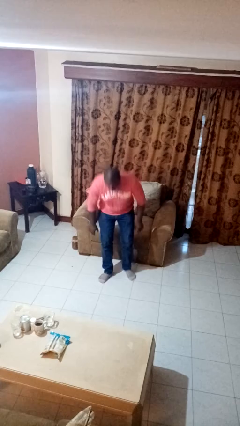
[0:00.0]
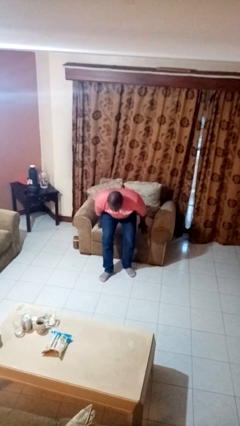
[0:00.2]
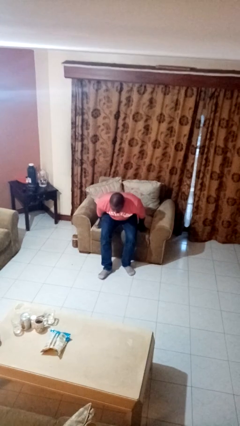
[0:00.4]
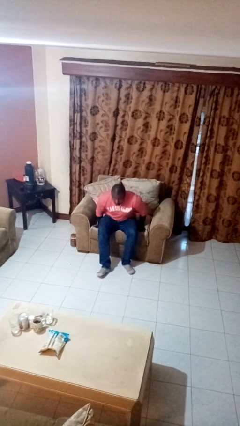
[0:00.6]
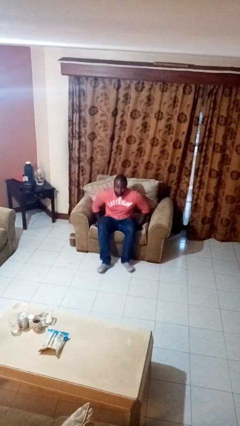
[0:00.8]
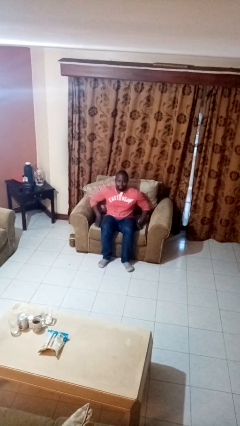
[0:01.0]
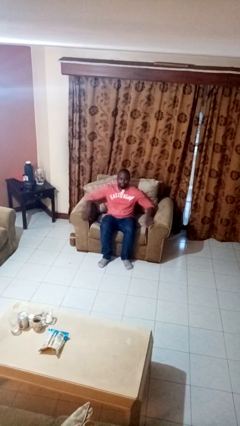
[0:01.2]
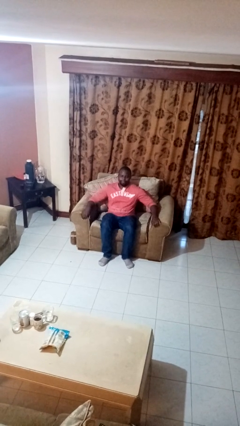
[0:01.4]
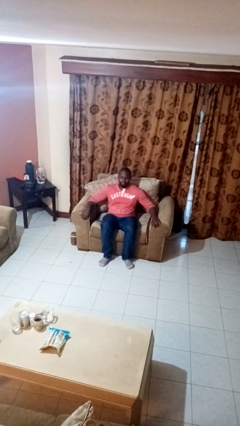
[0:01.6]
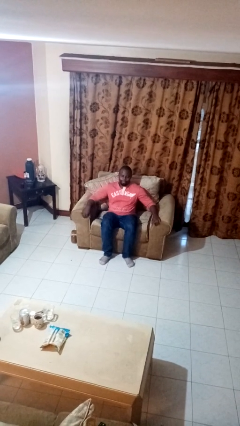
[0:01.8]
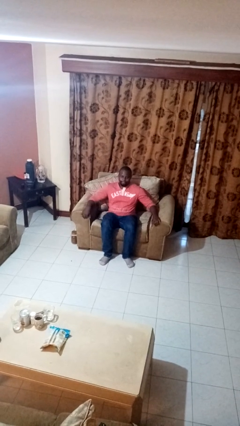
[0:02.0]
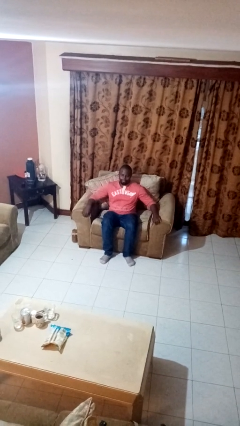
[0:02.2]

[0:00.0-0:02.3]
person sits down

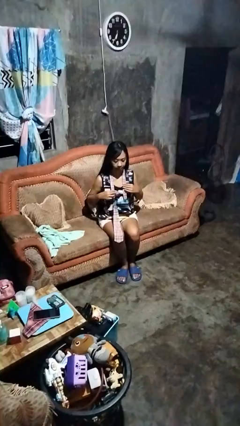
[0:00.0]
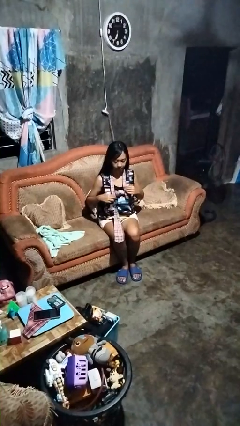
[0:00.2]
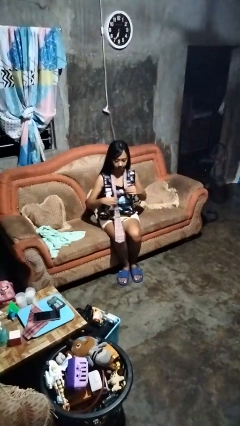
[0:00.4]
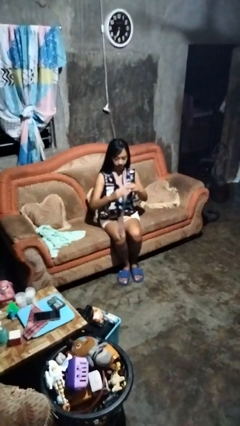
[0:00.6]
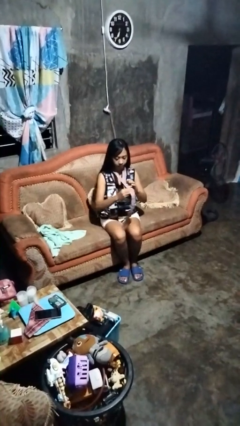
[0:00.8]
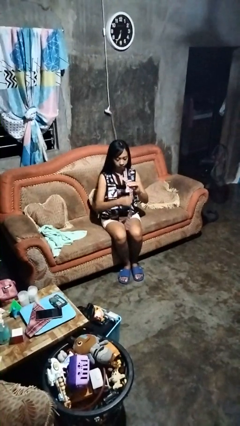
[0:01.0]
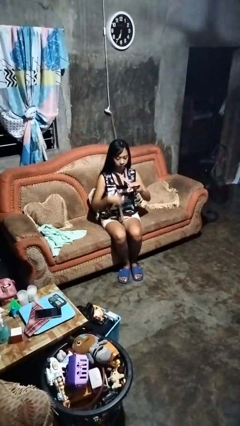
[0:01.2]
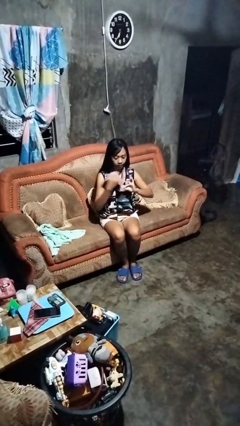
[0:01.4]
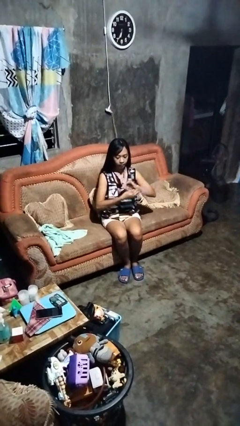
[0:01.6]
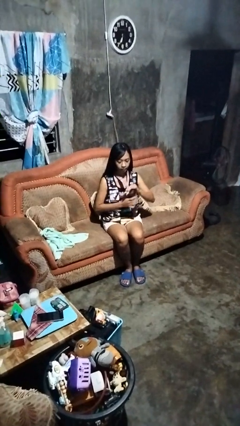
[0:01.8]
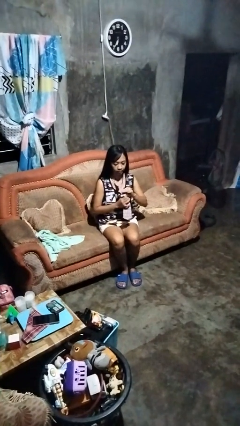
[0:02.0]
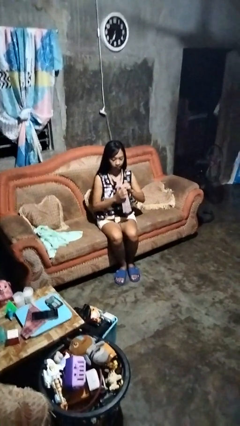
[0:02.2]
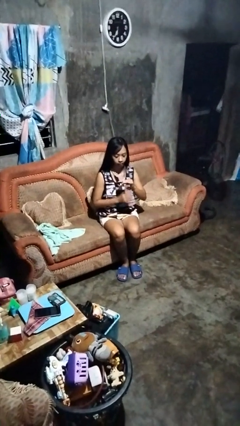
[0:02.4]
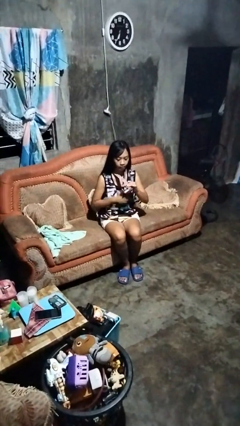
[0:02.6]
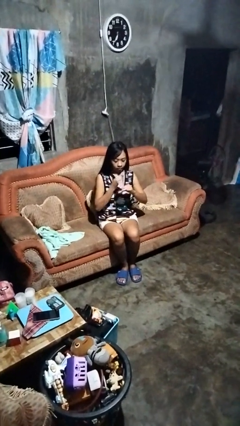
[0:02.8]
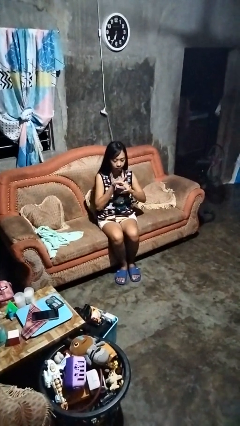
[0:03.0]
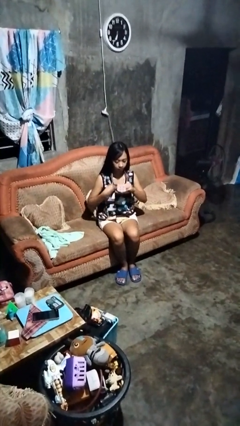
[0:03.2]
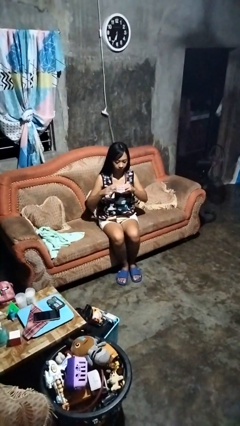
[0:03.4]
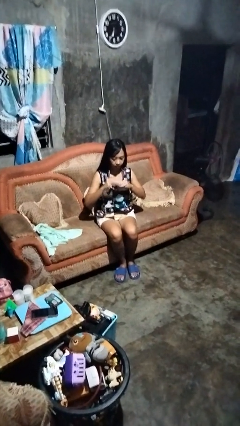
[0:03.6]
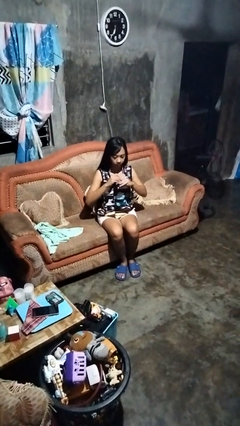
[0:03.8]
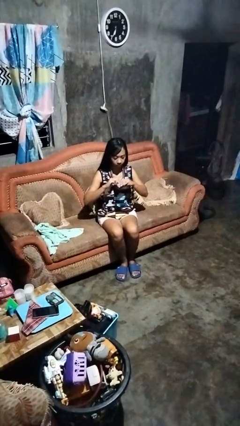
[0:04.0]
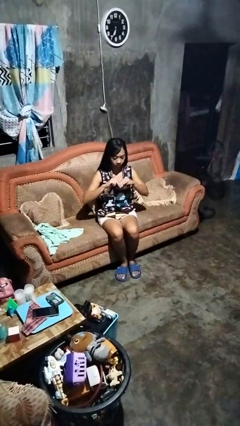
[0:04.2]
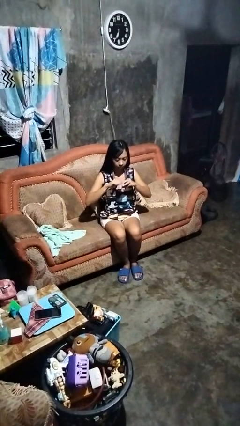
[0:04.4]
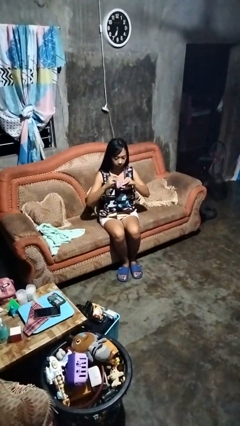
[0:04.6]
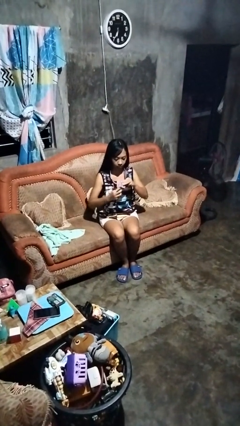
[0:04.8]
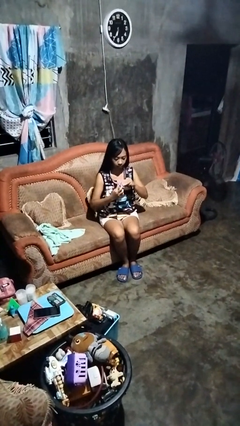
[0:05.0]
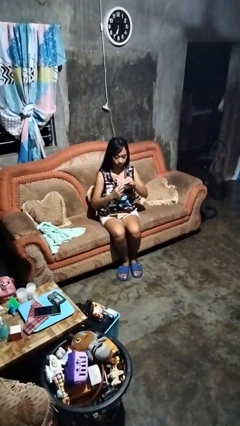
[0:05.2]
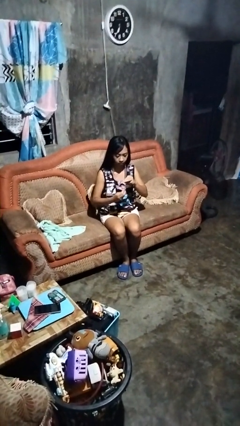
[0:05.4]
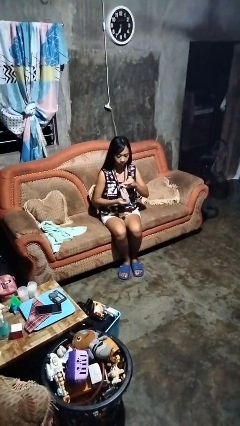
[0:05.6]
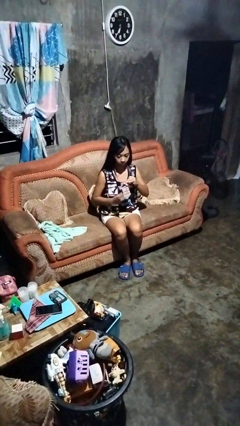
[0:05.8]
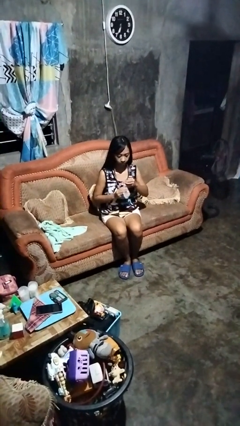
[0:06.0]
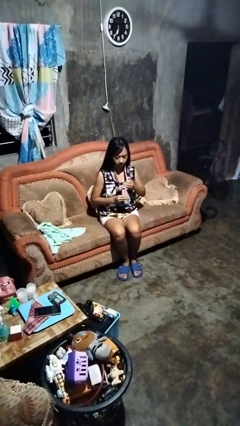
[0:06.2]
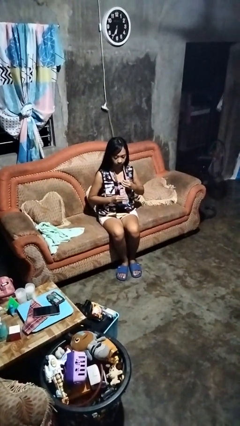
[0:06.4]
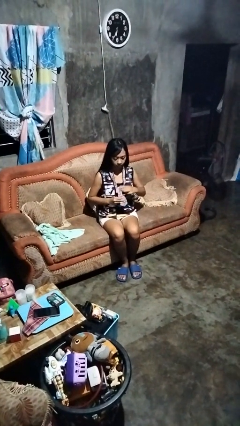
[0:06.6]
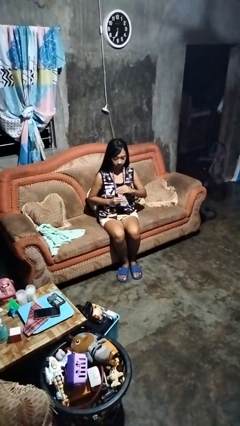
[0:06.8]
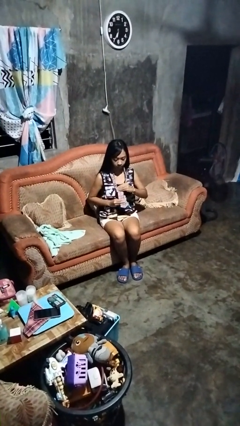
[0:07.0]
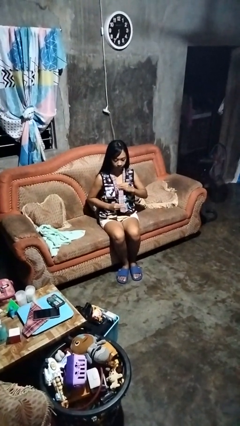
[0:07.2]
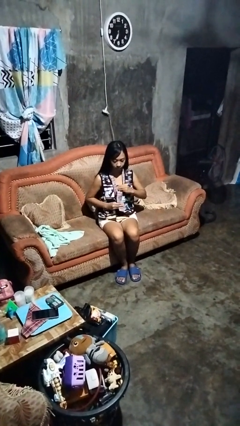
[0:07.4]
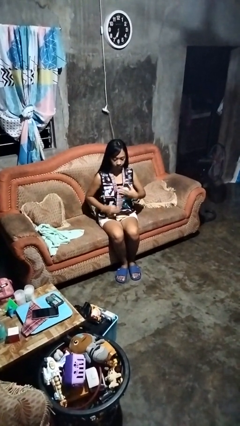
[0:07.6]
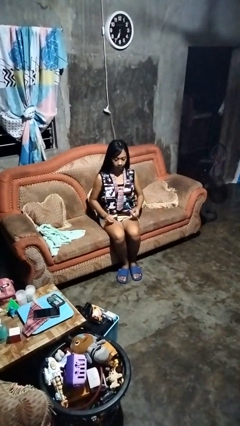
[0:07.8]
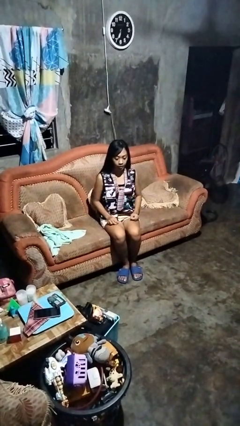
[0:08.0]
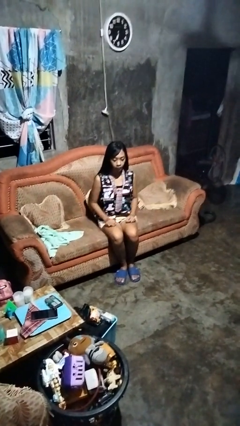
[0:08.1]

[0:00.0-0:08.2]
person puts on necktie

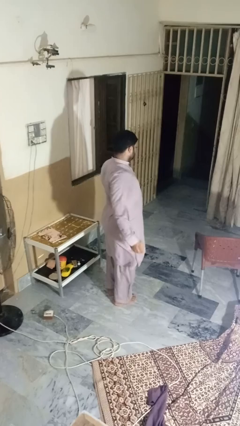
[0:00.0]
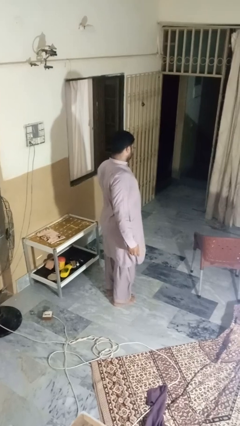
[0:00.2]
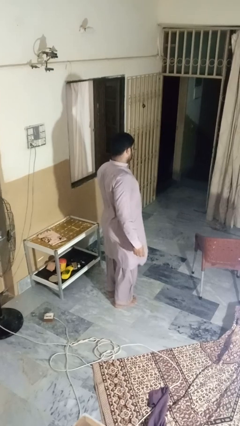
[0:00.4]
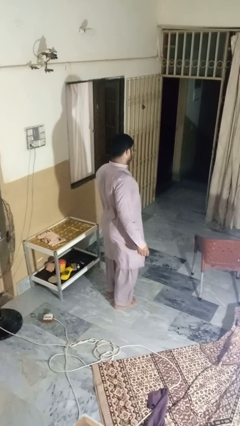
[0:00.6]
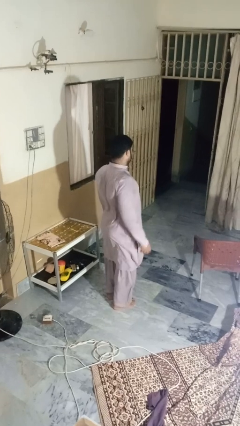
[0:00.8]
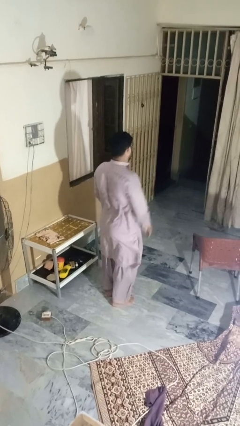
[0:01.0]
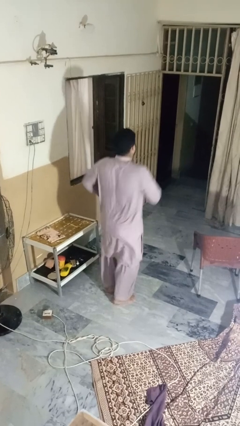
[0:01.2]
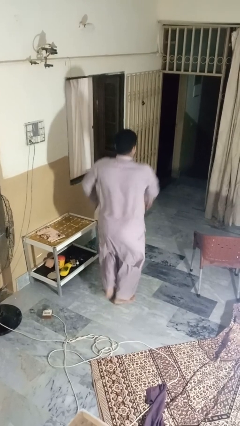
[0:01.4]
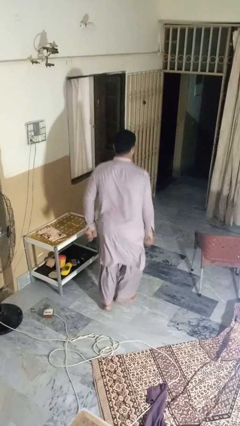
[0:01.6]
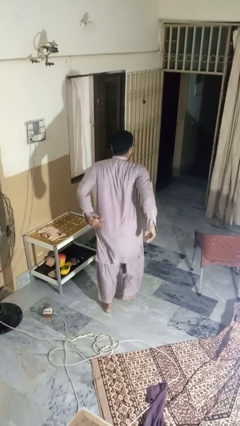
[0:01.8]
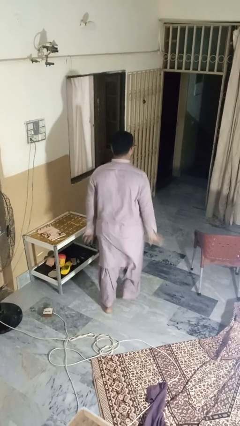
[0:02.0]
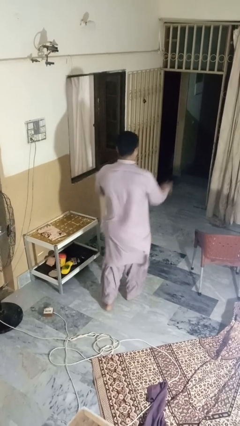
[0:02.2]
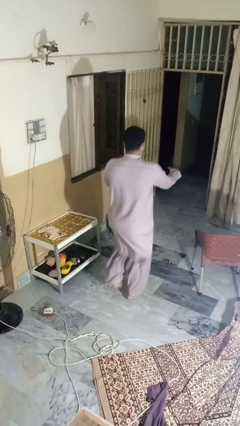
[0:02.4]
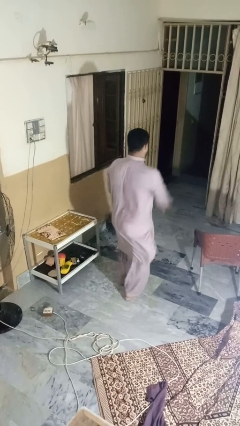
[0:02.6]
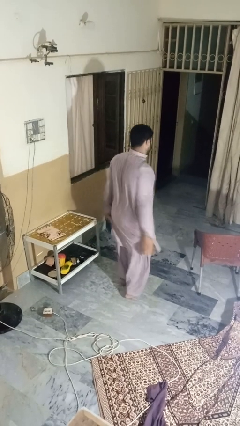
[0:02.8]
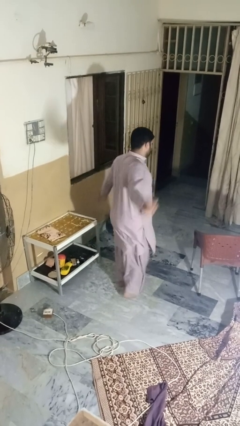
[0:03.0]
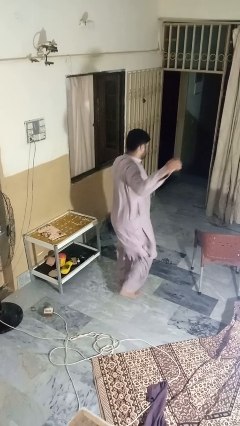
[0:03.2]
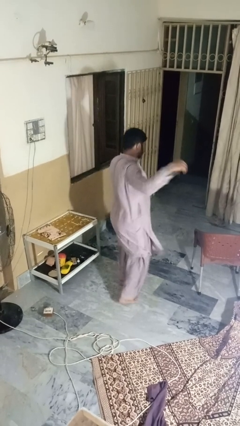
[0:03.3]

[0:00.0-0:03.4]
person dances in place

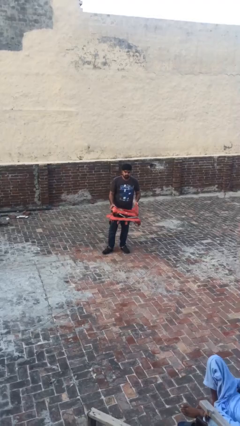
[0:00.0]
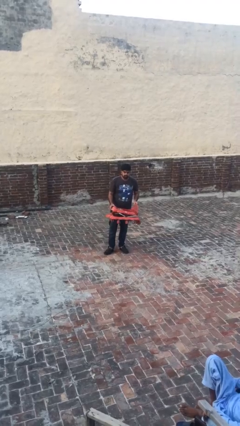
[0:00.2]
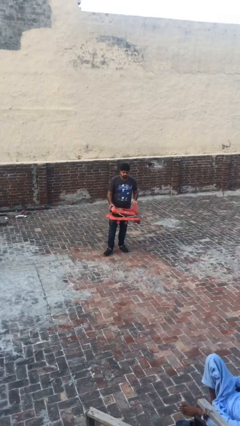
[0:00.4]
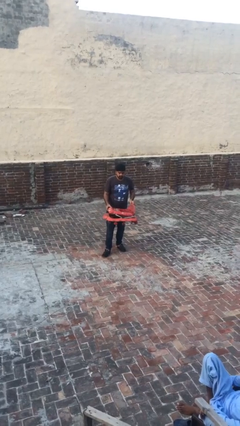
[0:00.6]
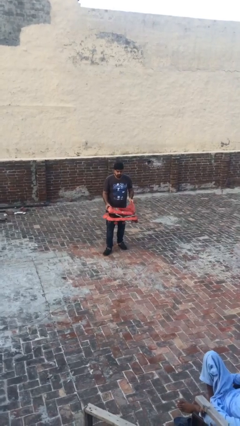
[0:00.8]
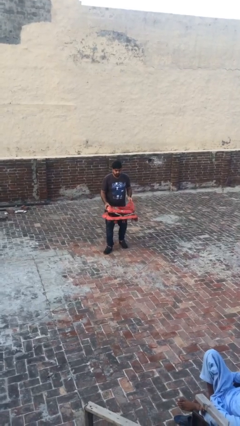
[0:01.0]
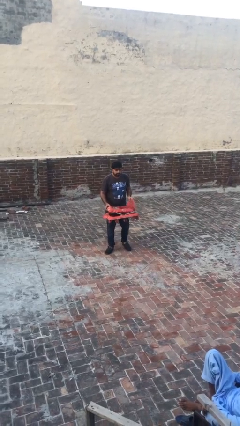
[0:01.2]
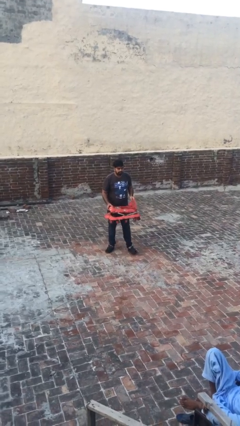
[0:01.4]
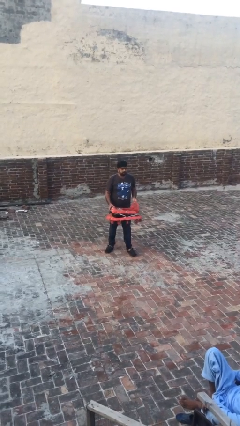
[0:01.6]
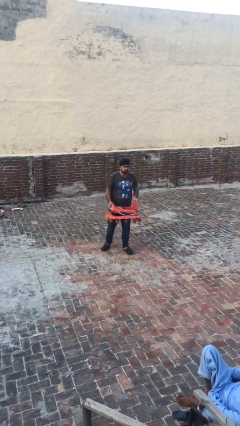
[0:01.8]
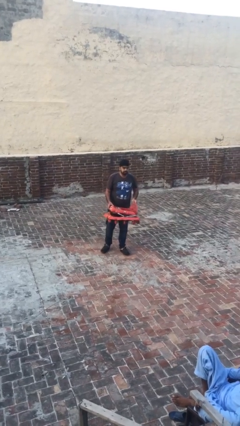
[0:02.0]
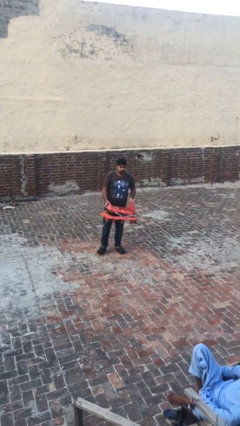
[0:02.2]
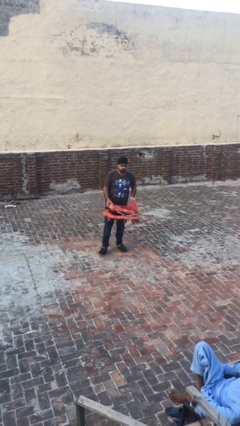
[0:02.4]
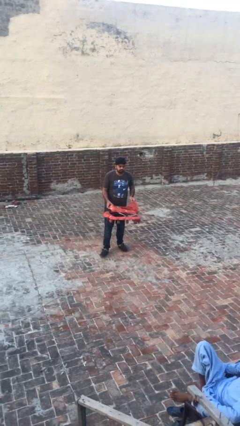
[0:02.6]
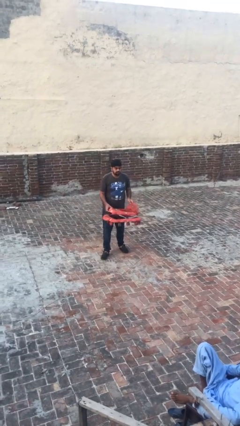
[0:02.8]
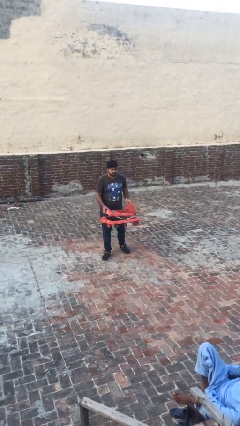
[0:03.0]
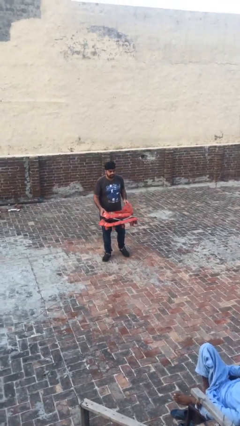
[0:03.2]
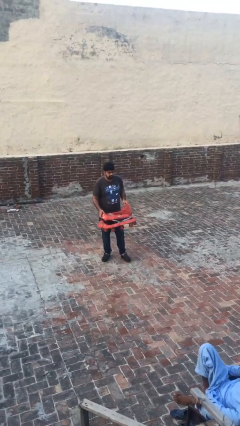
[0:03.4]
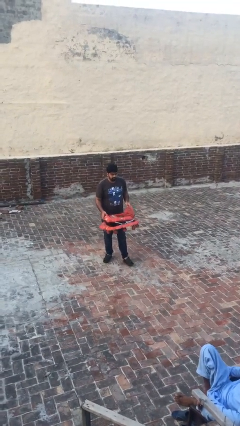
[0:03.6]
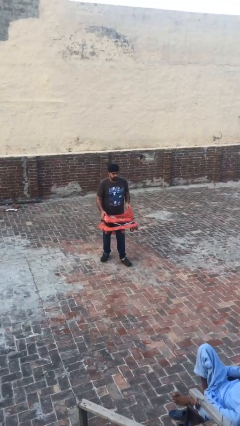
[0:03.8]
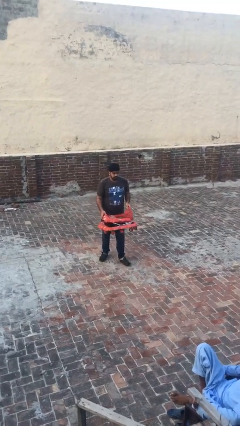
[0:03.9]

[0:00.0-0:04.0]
person carries heavy object

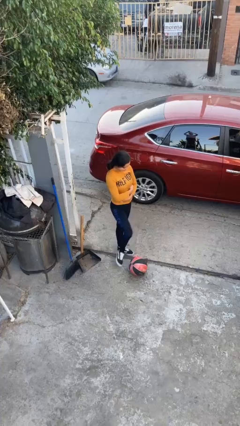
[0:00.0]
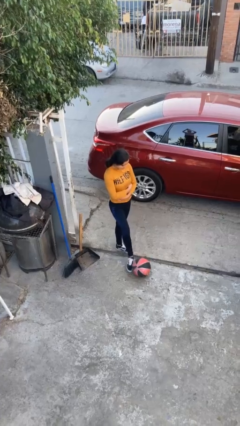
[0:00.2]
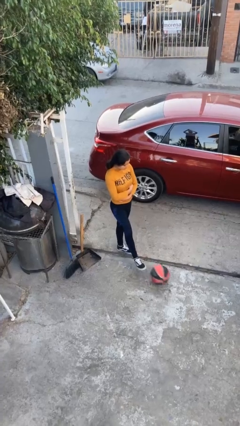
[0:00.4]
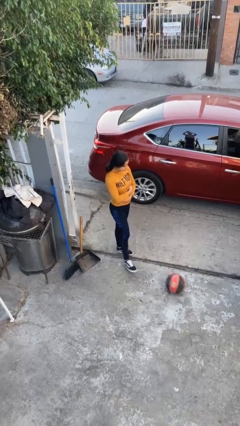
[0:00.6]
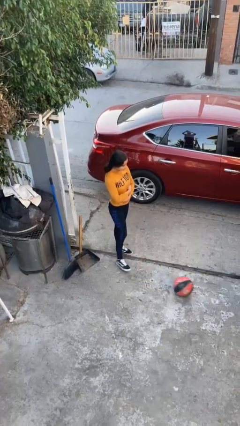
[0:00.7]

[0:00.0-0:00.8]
person kicks object to person
